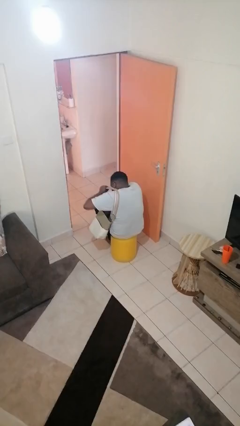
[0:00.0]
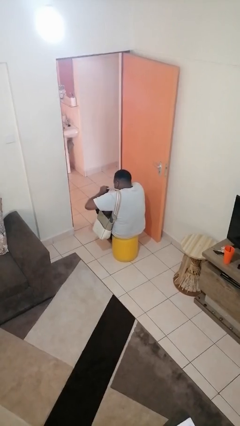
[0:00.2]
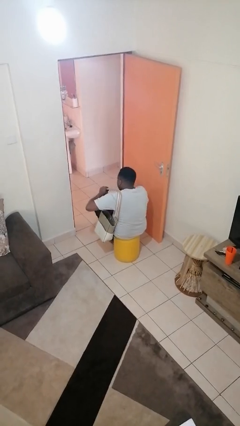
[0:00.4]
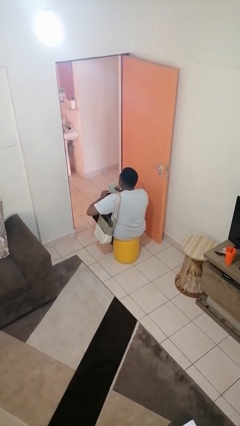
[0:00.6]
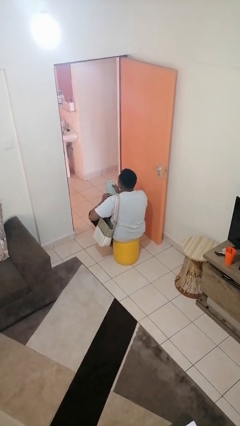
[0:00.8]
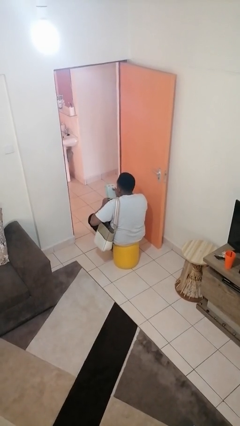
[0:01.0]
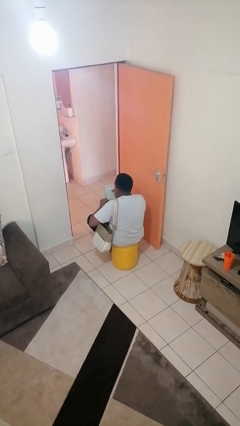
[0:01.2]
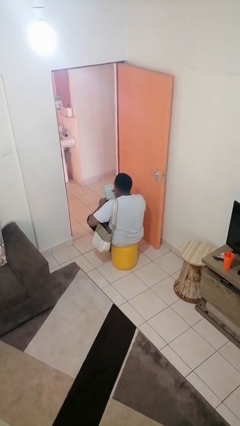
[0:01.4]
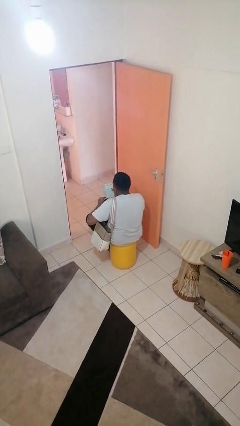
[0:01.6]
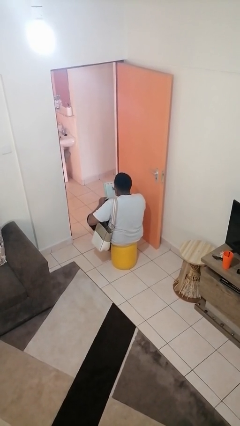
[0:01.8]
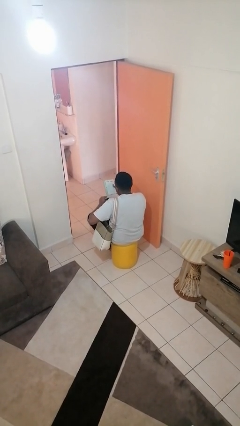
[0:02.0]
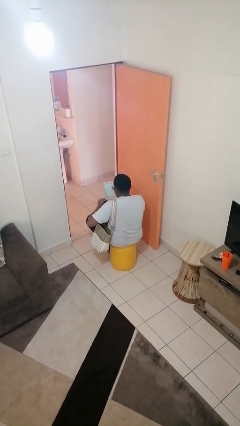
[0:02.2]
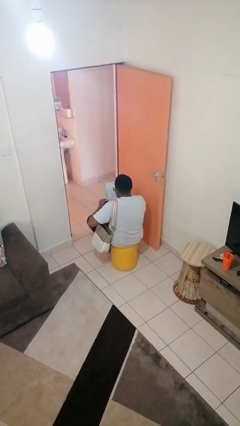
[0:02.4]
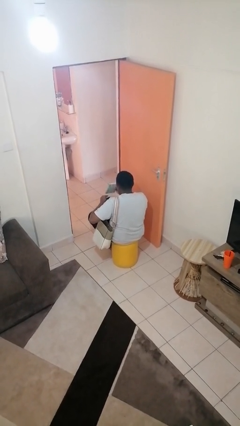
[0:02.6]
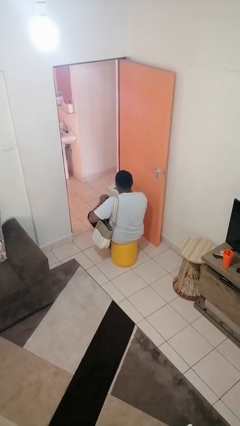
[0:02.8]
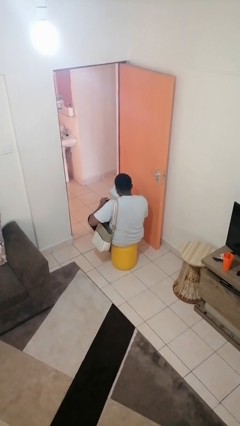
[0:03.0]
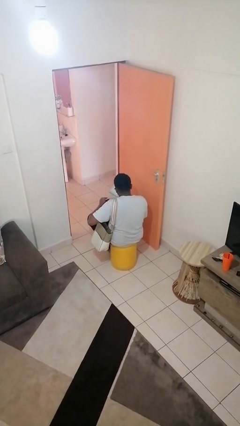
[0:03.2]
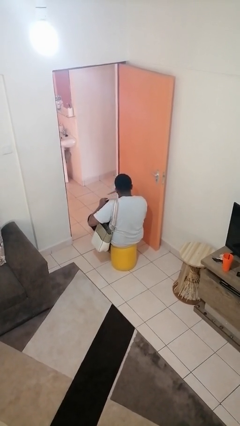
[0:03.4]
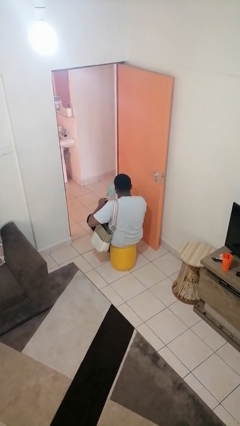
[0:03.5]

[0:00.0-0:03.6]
person takes object from purse

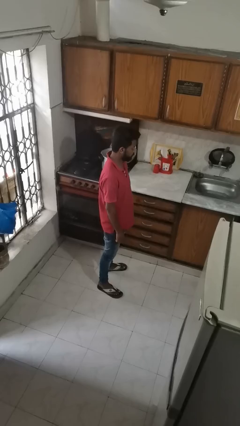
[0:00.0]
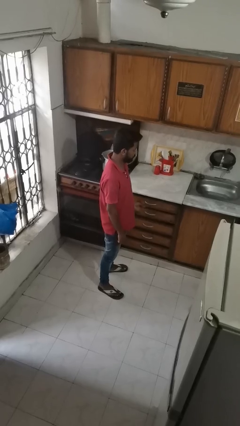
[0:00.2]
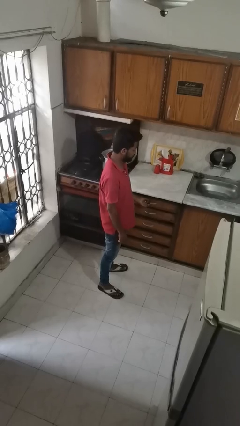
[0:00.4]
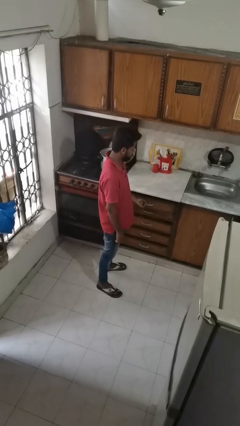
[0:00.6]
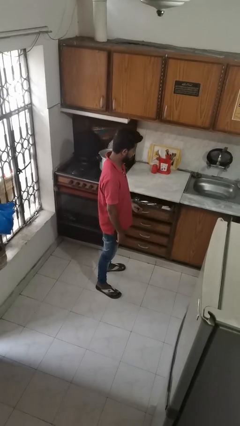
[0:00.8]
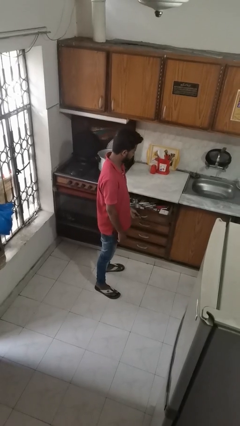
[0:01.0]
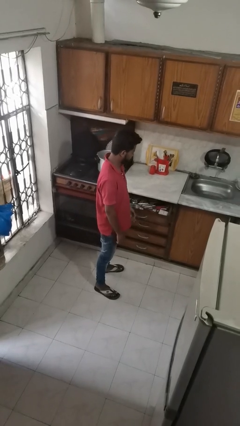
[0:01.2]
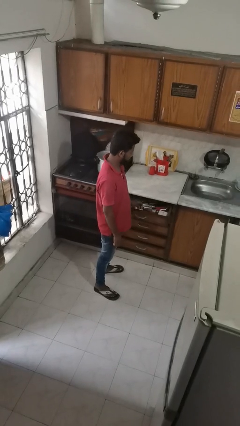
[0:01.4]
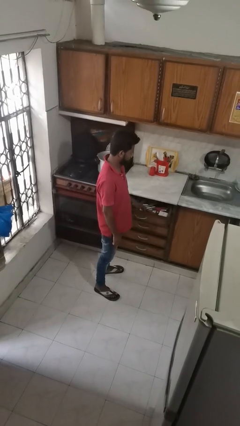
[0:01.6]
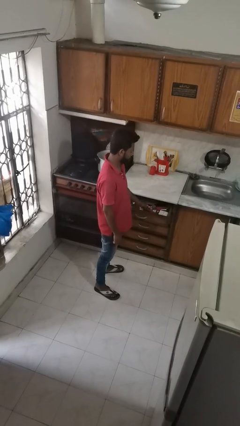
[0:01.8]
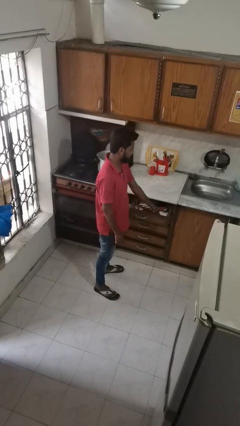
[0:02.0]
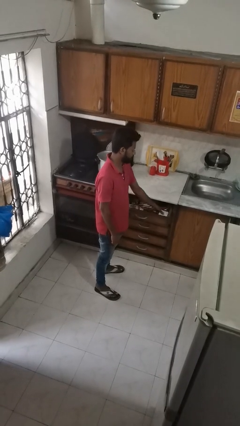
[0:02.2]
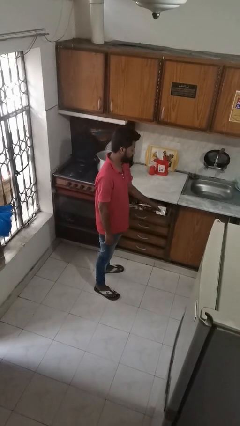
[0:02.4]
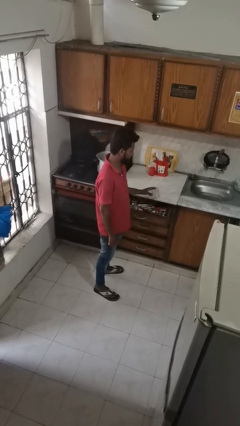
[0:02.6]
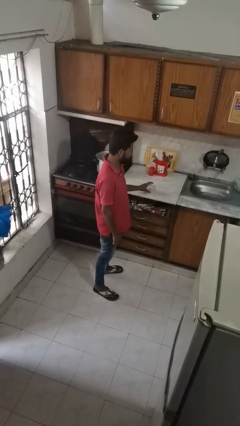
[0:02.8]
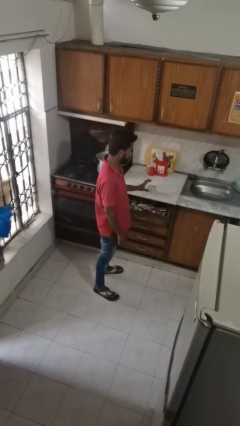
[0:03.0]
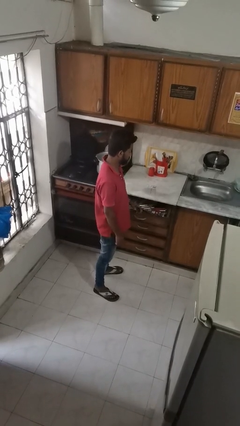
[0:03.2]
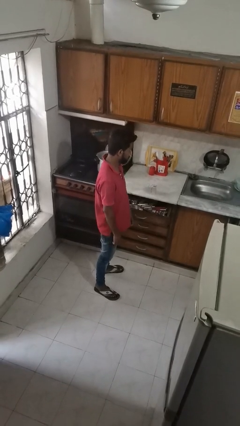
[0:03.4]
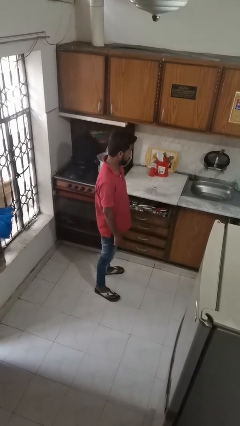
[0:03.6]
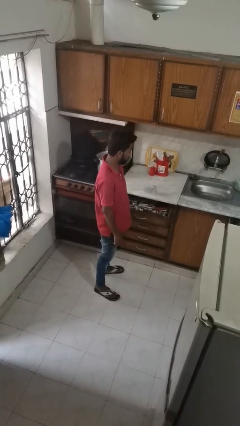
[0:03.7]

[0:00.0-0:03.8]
person takes object from kitchen drawer

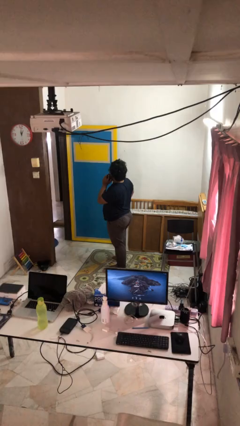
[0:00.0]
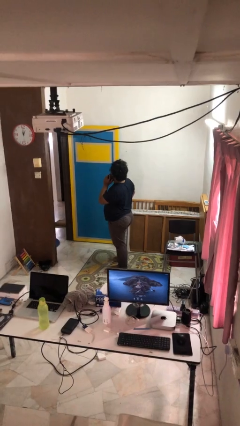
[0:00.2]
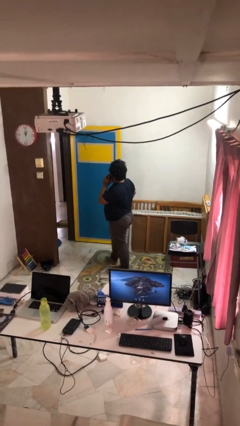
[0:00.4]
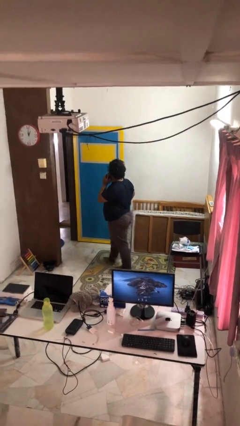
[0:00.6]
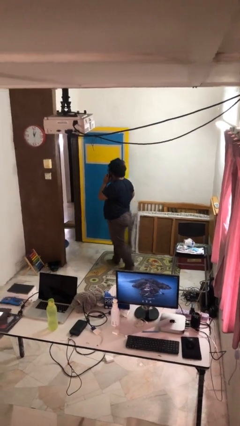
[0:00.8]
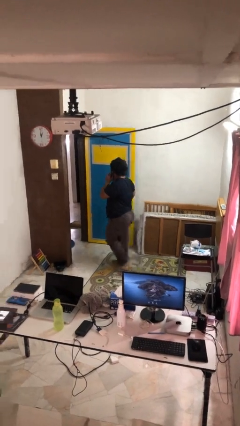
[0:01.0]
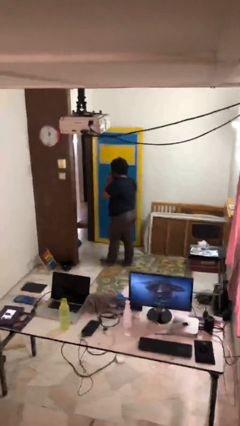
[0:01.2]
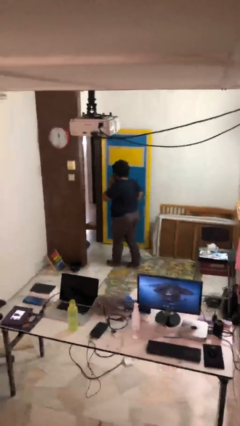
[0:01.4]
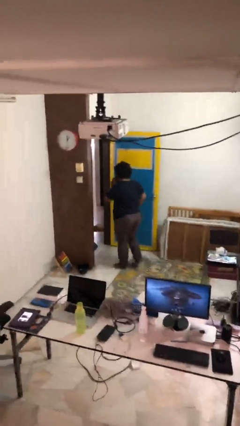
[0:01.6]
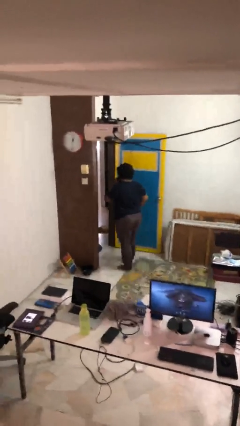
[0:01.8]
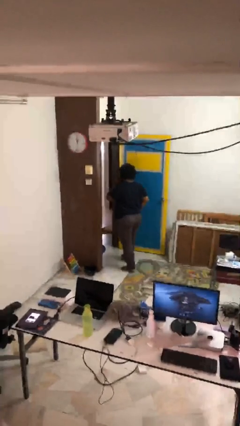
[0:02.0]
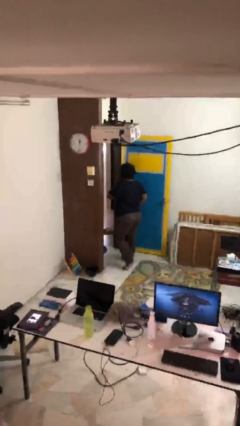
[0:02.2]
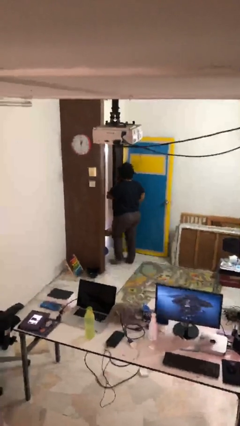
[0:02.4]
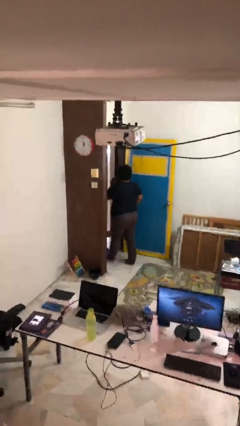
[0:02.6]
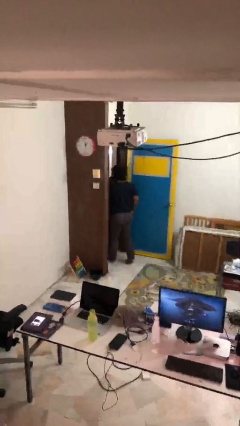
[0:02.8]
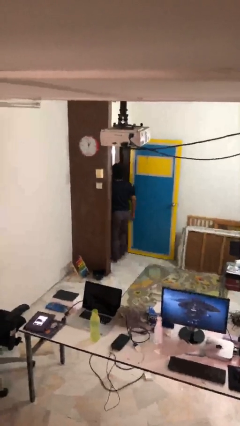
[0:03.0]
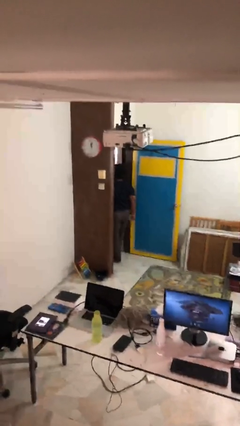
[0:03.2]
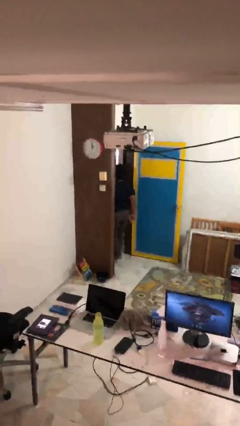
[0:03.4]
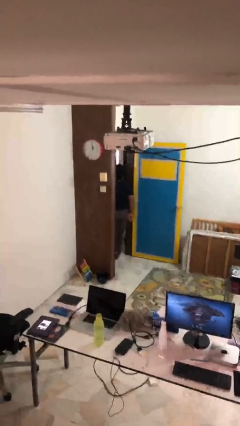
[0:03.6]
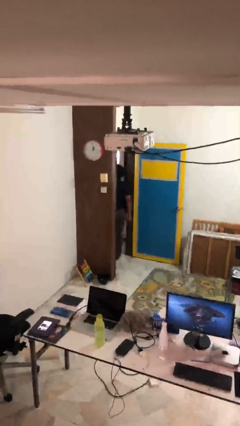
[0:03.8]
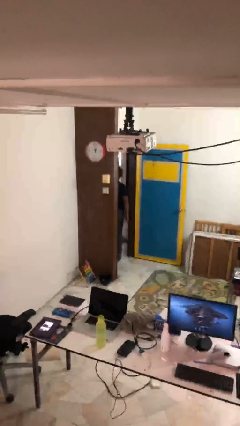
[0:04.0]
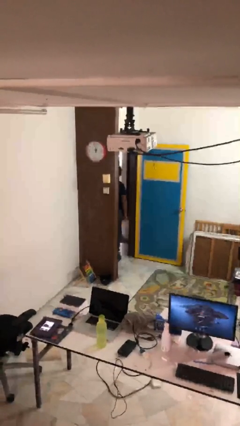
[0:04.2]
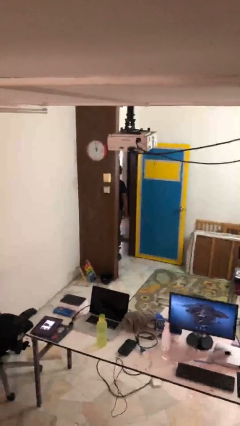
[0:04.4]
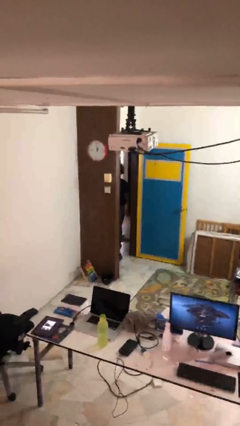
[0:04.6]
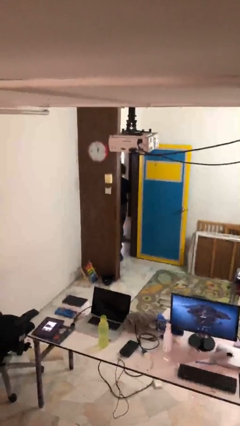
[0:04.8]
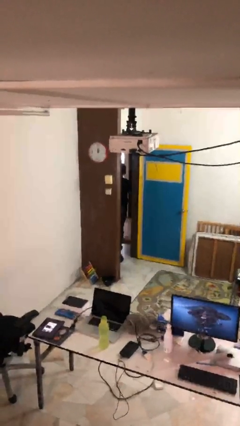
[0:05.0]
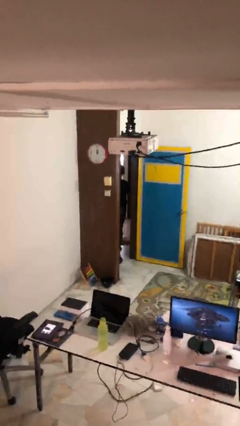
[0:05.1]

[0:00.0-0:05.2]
person exits scene through structure

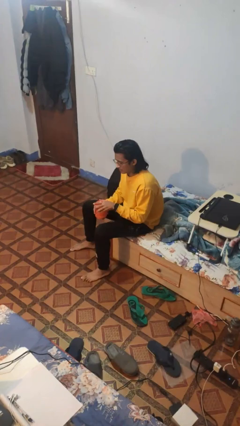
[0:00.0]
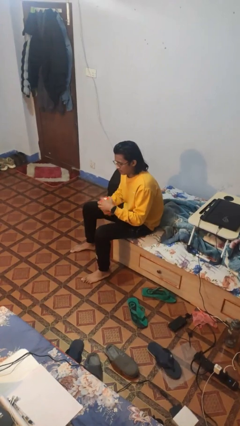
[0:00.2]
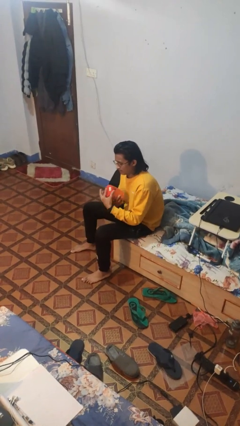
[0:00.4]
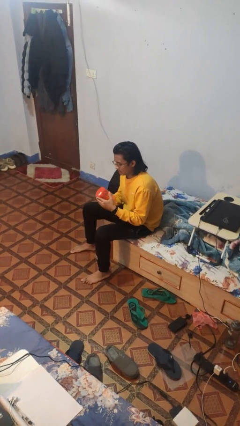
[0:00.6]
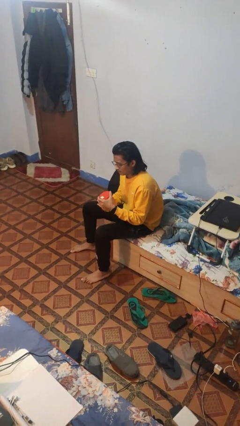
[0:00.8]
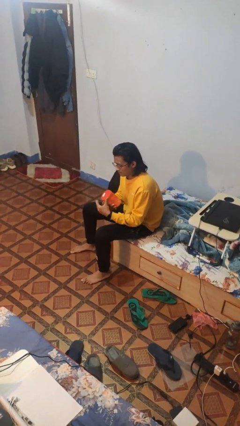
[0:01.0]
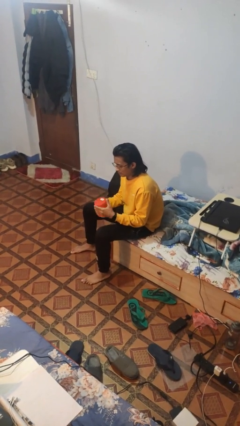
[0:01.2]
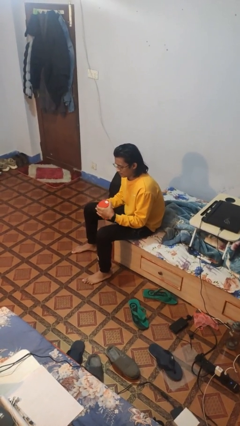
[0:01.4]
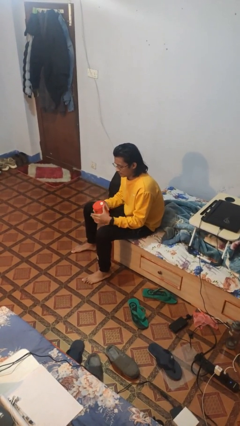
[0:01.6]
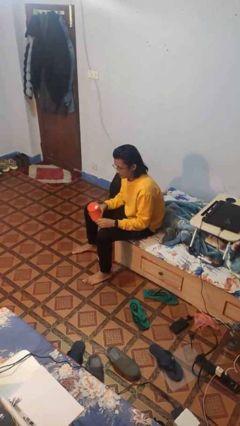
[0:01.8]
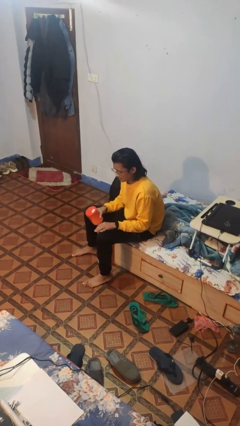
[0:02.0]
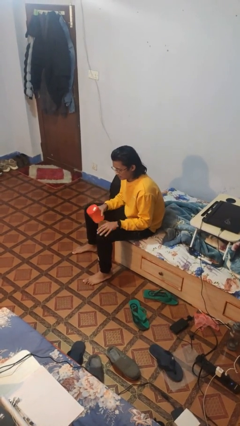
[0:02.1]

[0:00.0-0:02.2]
person closes jar

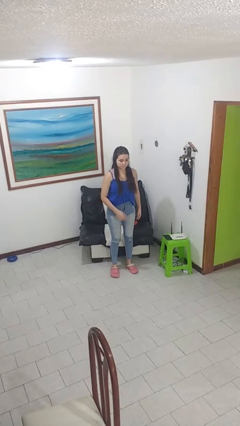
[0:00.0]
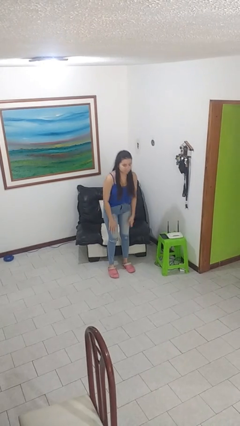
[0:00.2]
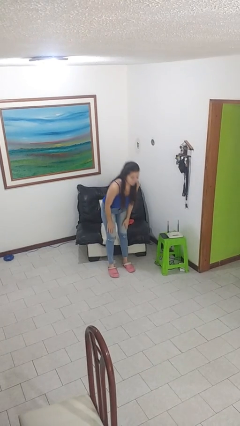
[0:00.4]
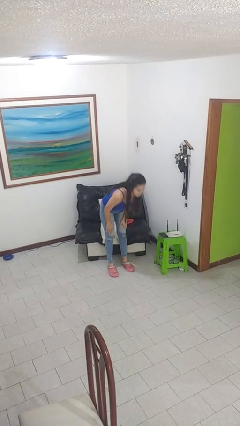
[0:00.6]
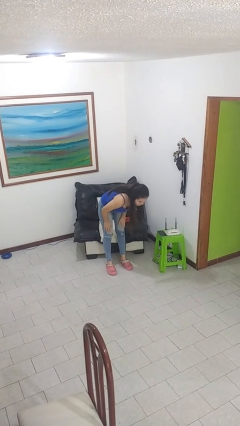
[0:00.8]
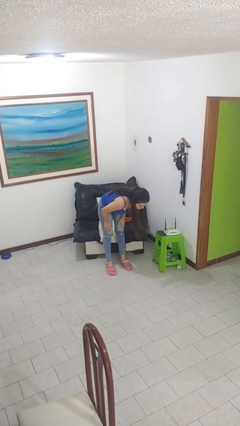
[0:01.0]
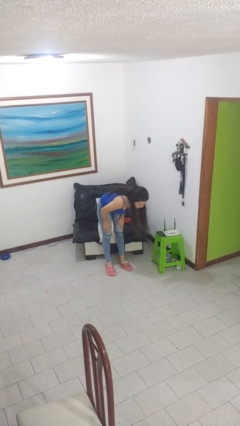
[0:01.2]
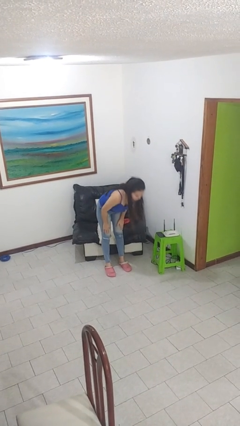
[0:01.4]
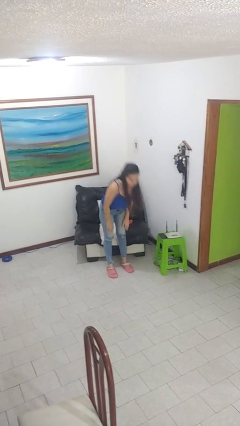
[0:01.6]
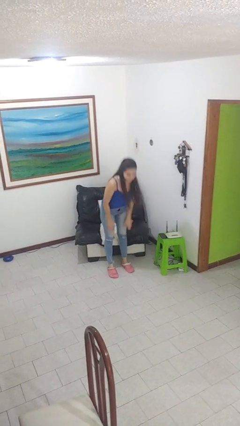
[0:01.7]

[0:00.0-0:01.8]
person bows

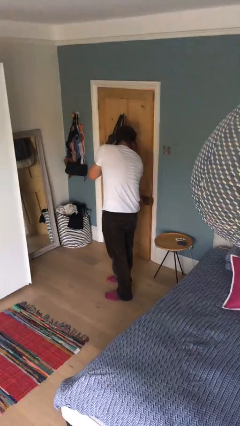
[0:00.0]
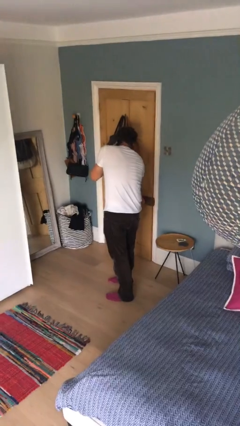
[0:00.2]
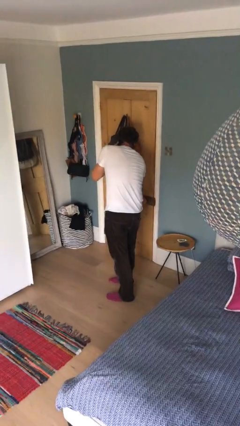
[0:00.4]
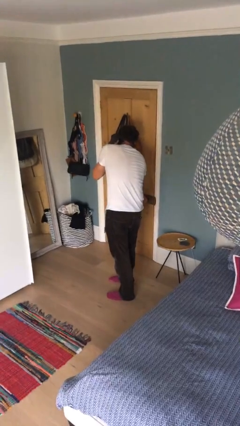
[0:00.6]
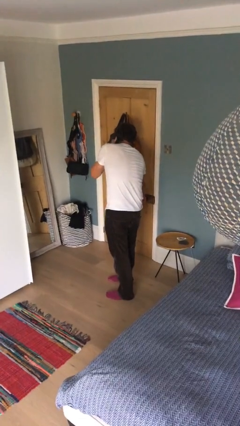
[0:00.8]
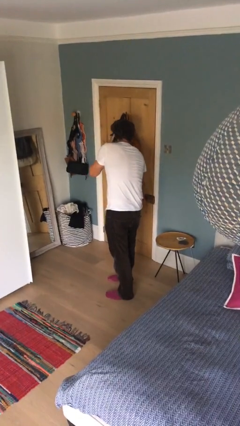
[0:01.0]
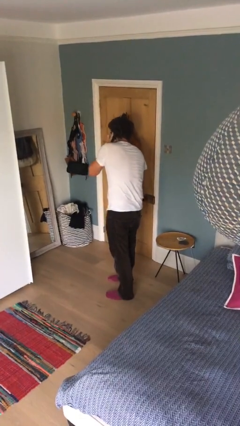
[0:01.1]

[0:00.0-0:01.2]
person closes facility door
